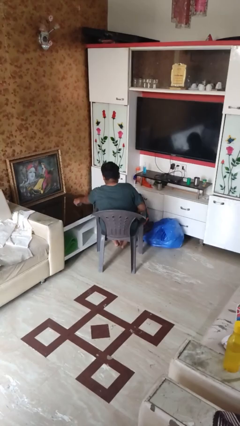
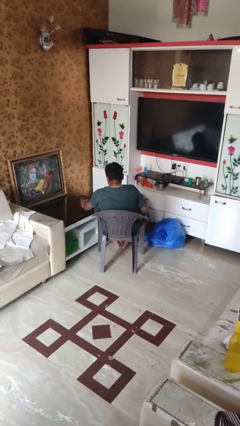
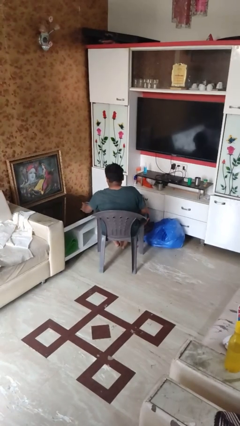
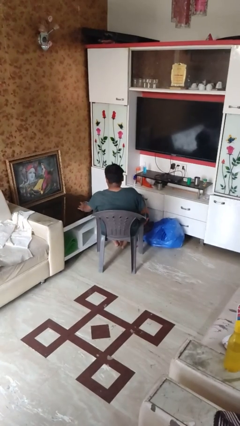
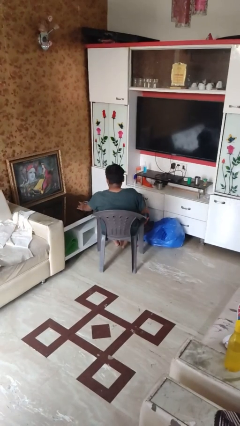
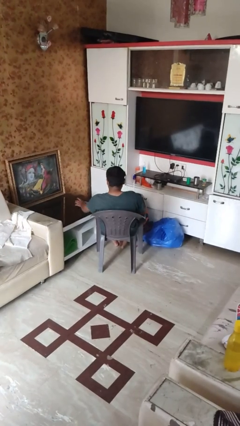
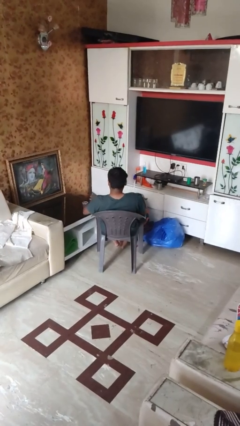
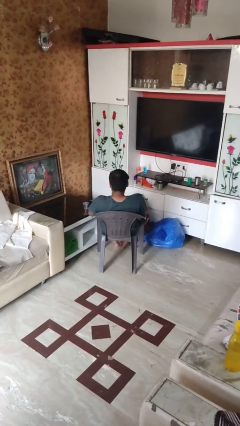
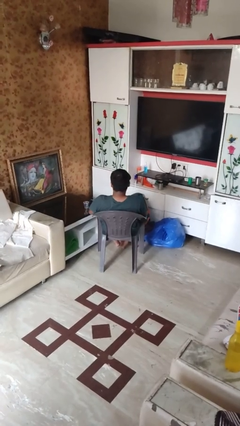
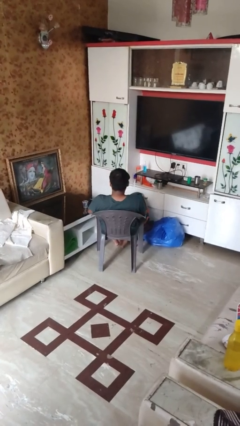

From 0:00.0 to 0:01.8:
person sets upright glass

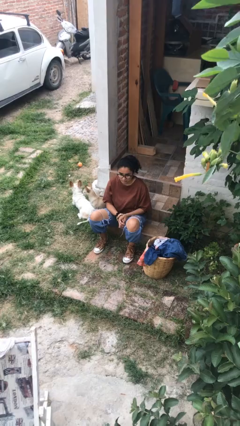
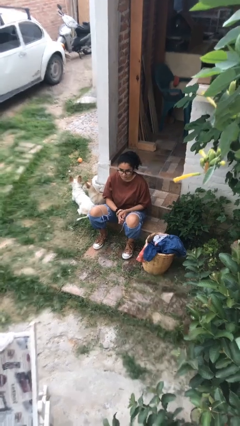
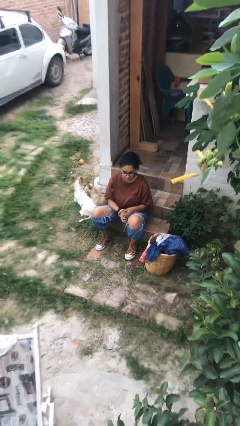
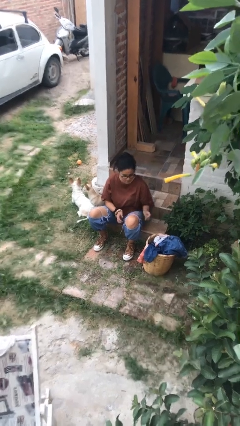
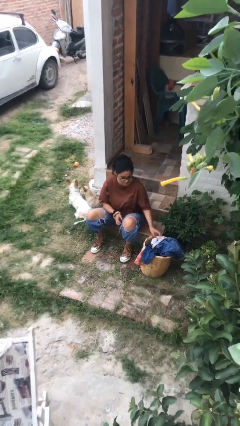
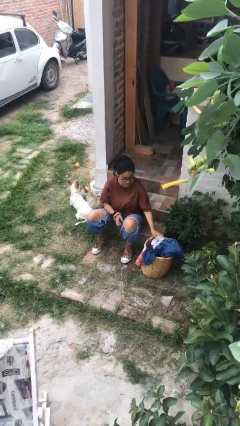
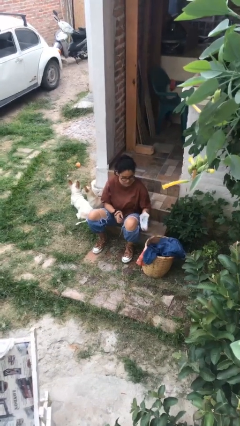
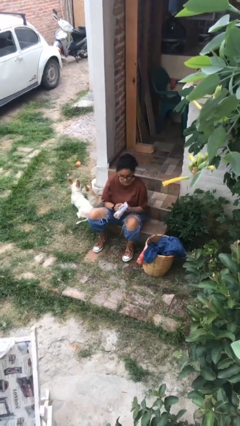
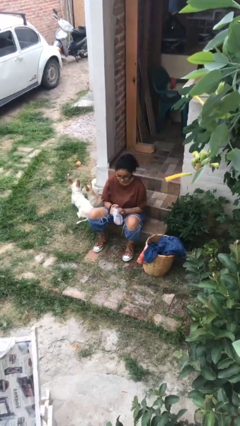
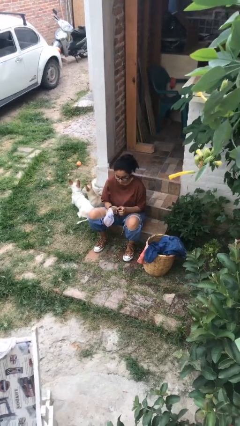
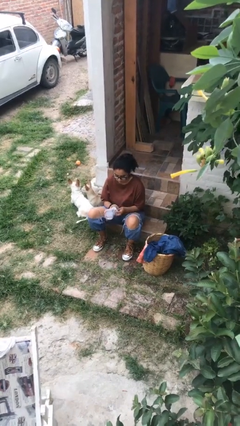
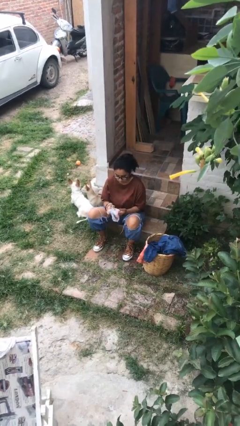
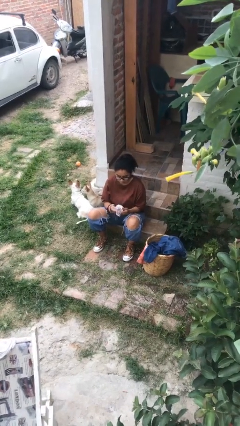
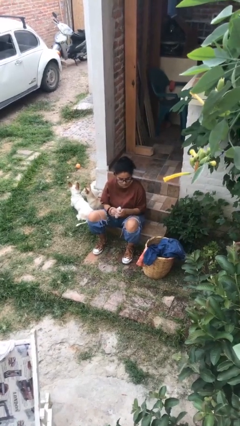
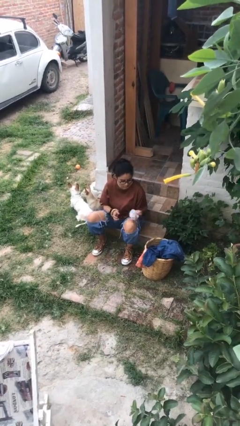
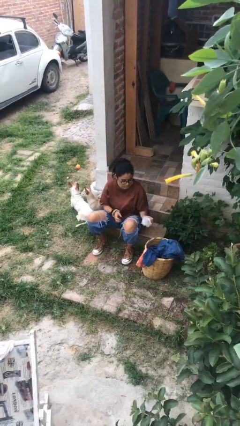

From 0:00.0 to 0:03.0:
person folds socks

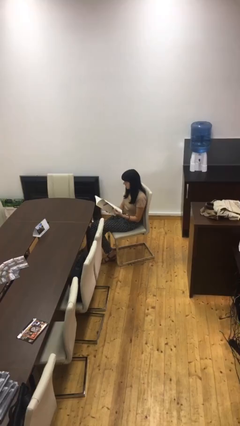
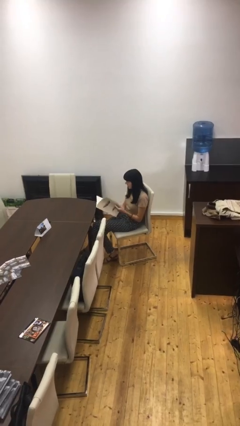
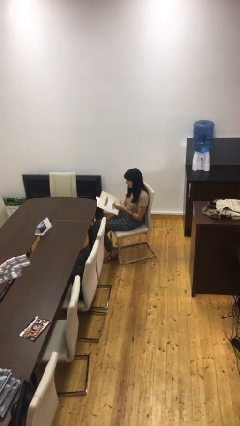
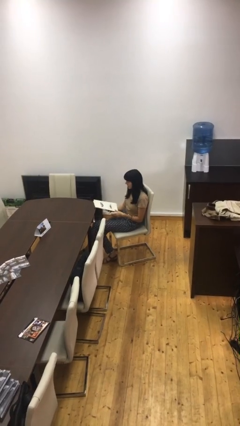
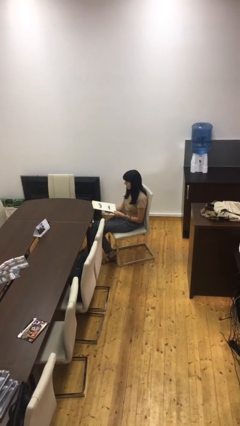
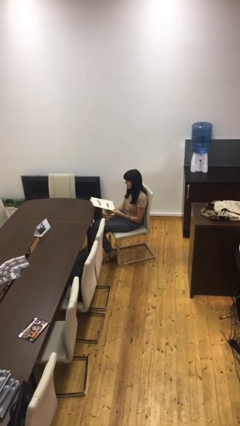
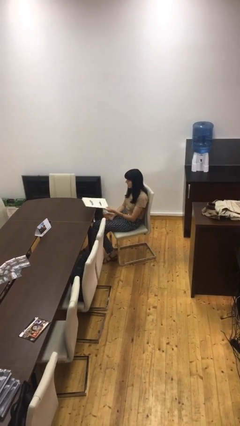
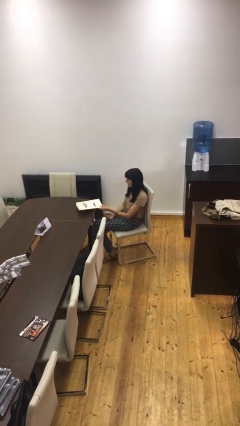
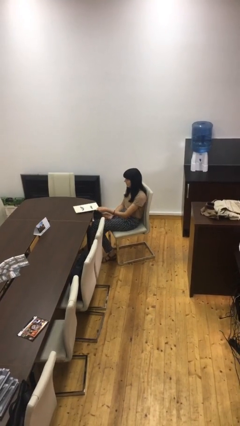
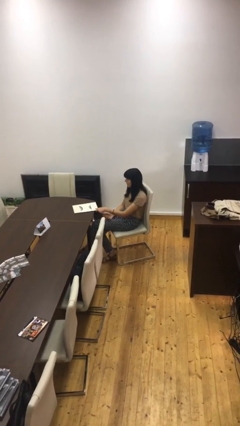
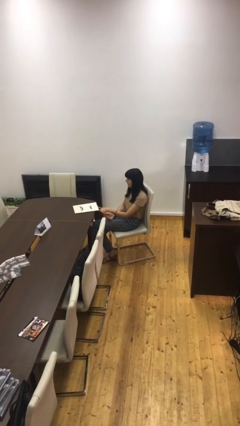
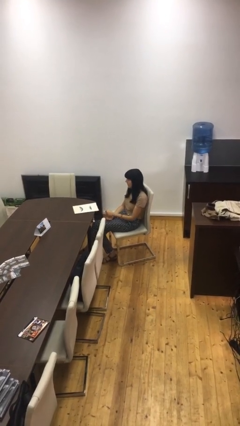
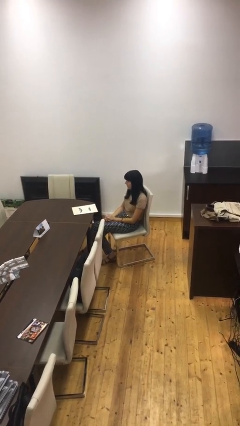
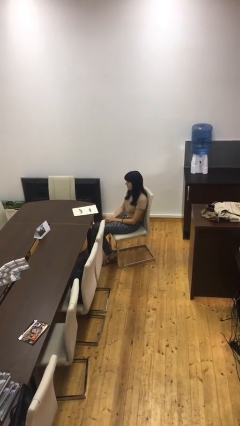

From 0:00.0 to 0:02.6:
person puts down object on table

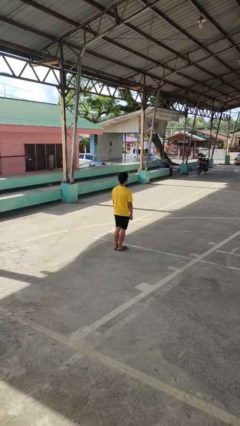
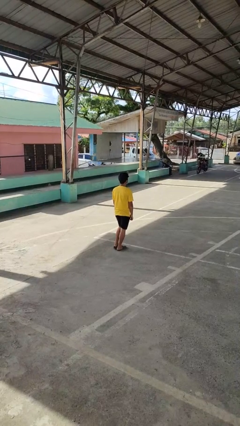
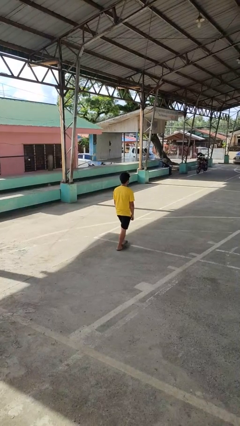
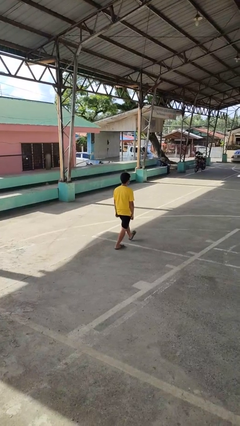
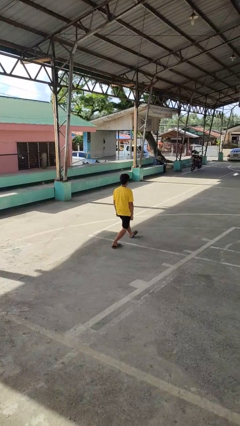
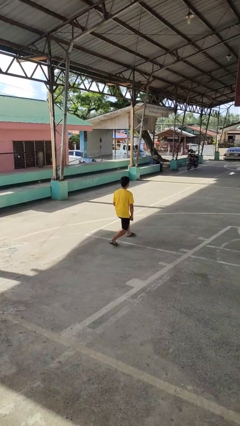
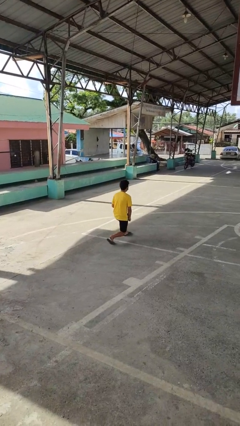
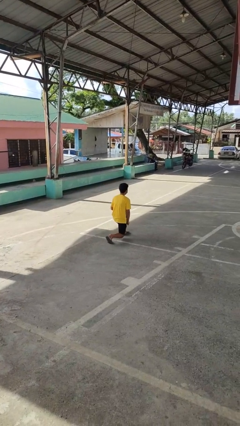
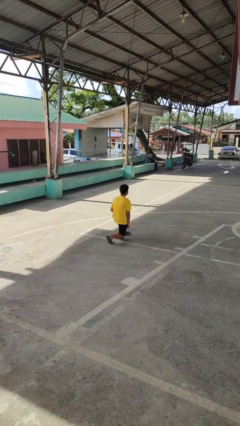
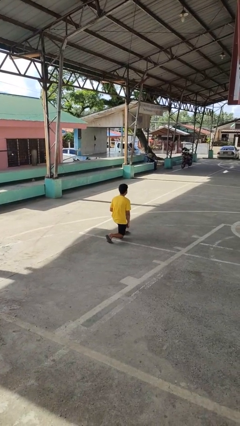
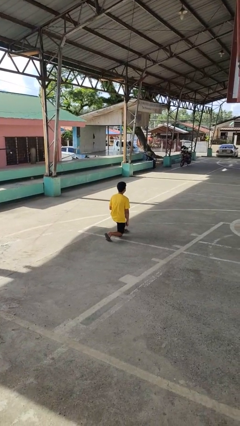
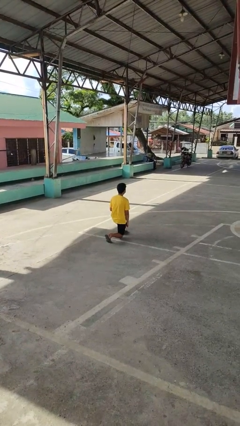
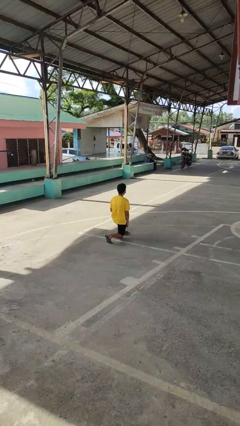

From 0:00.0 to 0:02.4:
person kneels

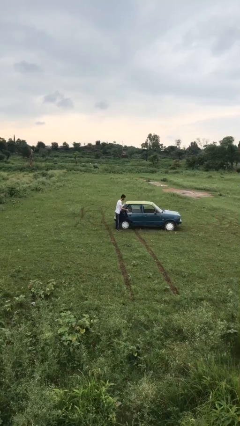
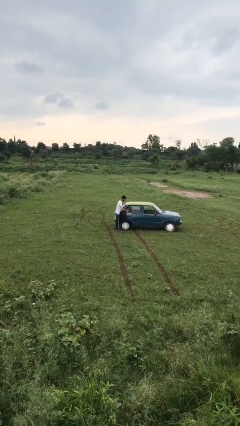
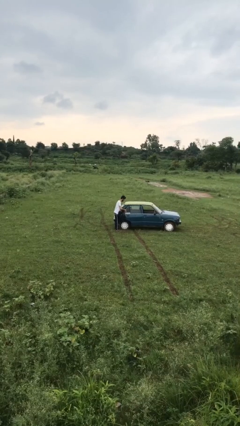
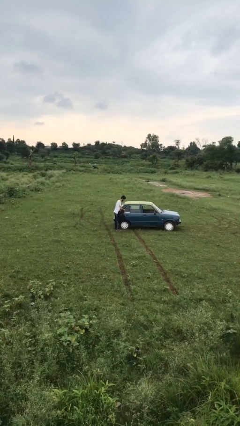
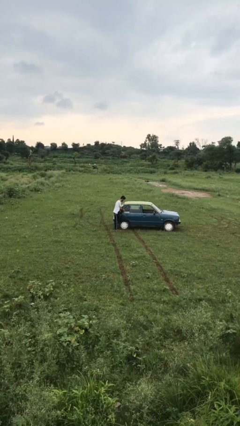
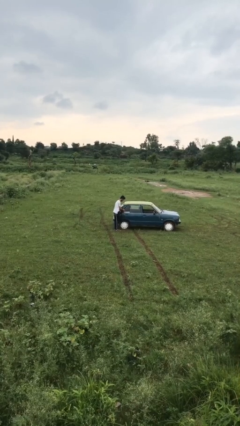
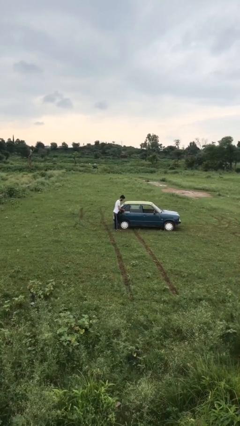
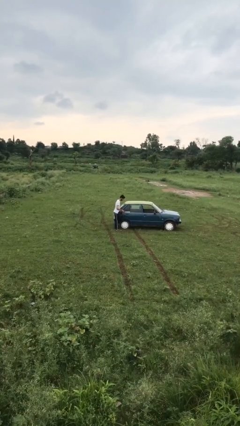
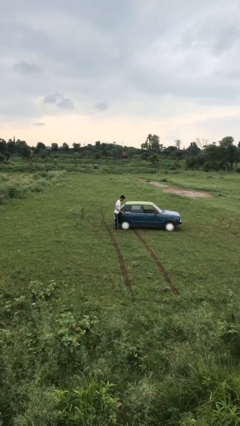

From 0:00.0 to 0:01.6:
person closes car door

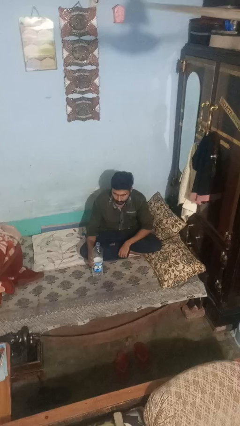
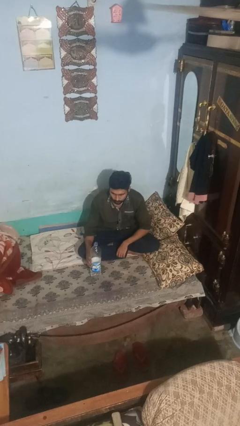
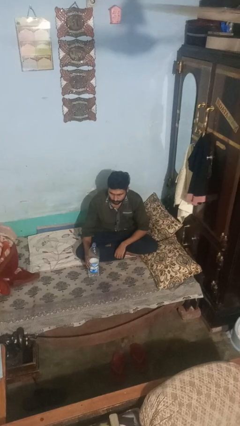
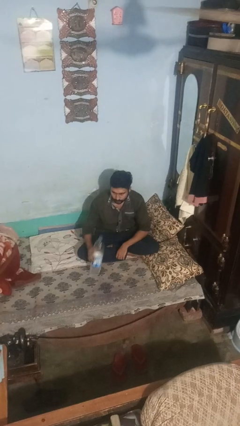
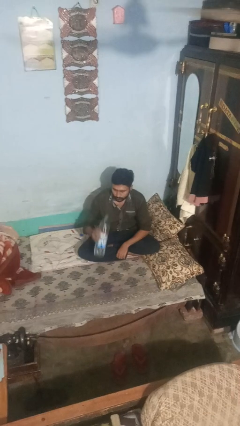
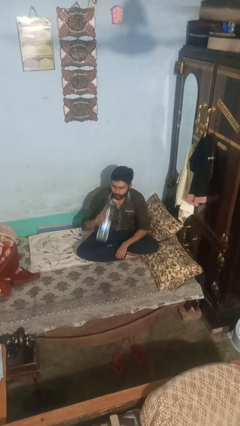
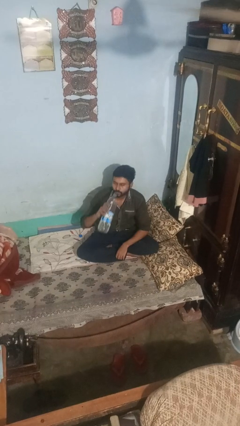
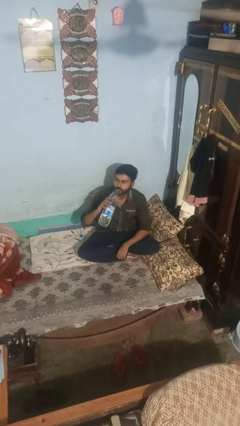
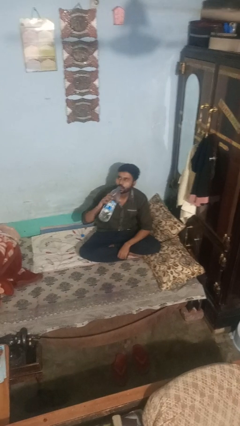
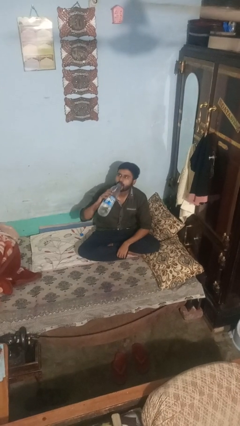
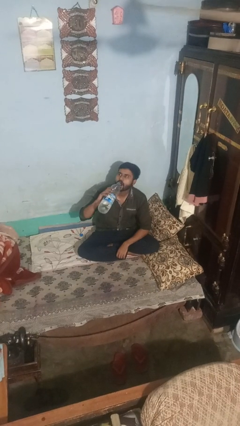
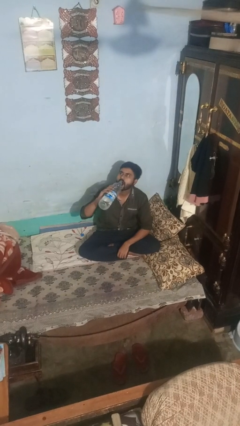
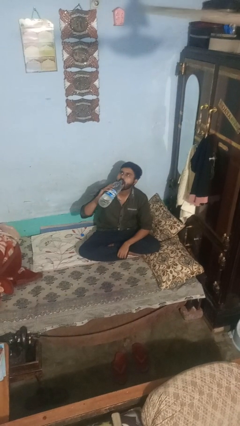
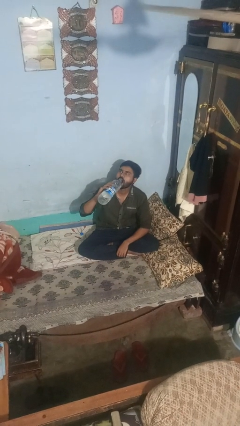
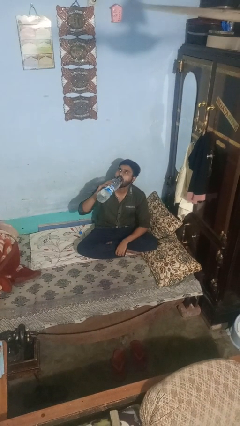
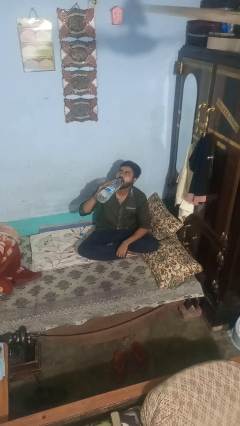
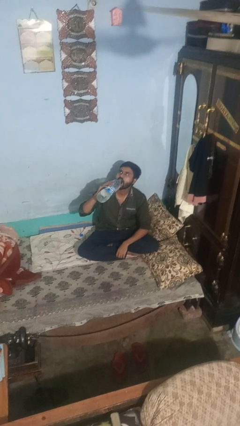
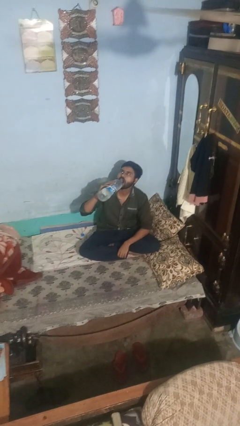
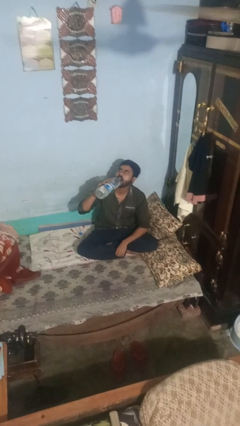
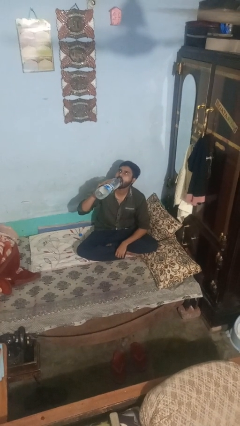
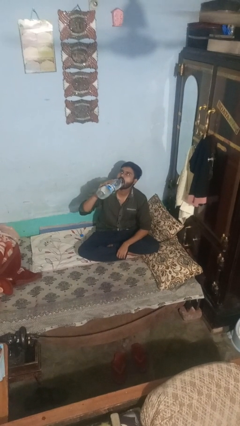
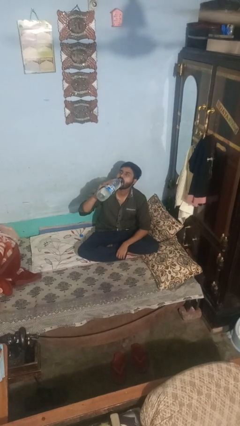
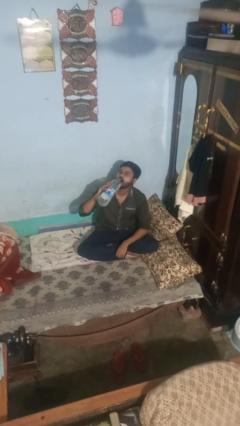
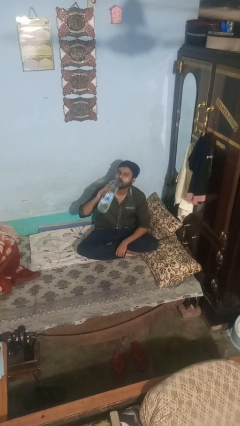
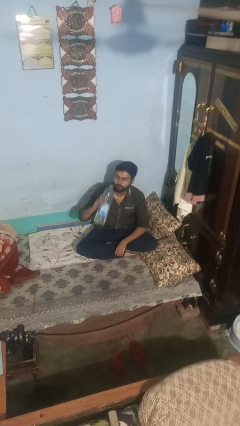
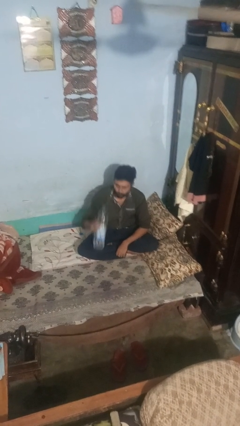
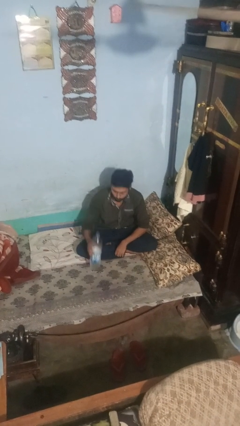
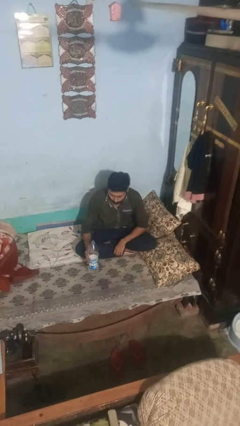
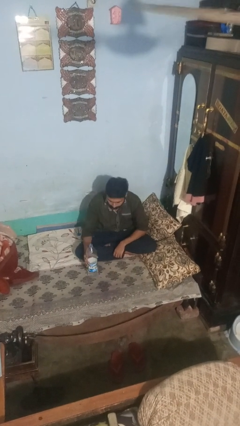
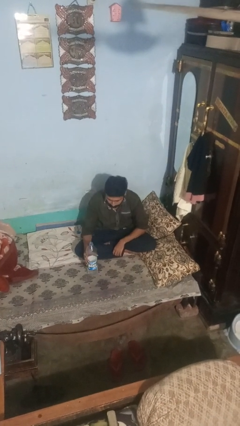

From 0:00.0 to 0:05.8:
person drinks from bottle
